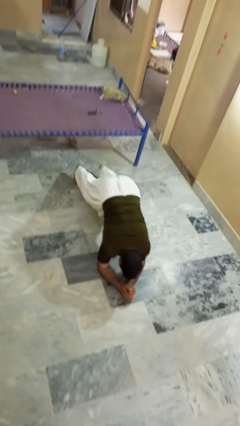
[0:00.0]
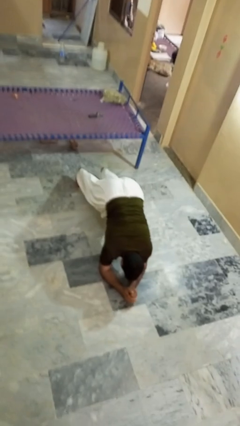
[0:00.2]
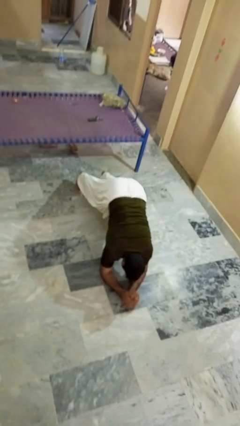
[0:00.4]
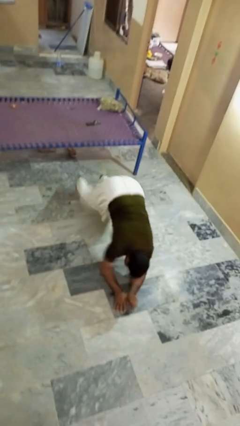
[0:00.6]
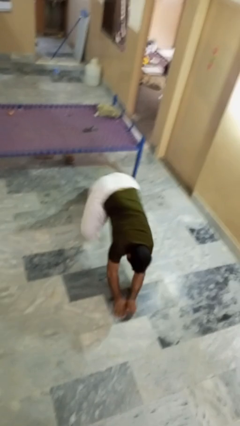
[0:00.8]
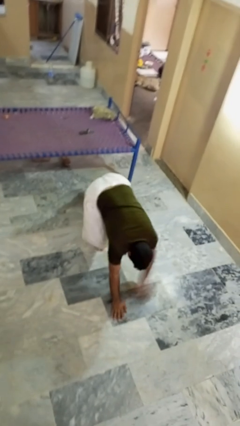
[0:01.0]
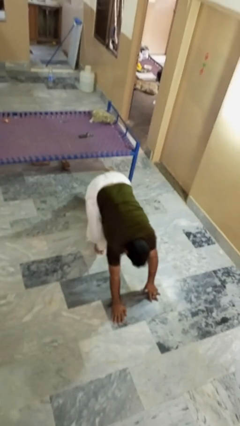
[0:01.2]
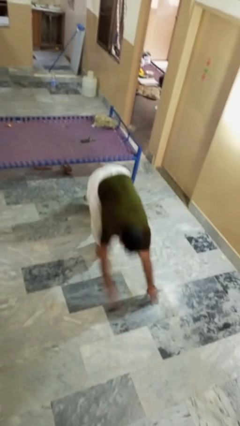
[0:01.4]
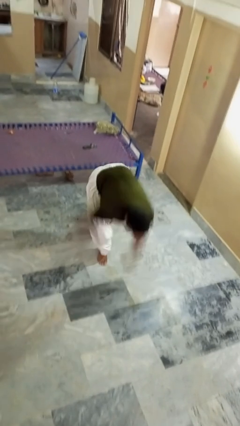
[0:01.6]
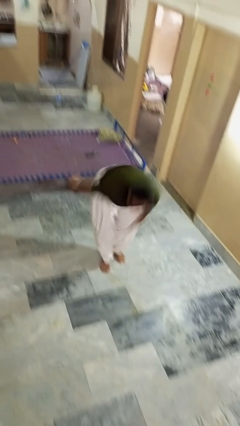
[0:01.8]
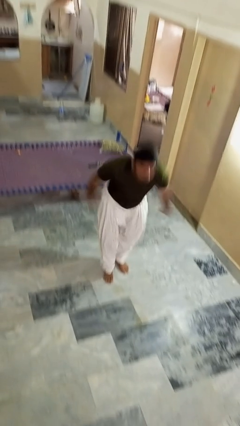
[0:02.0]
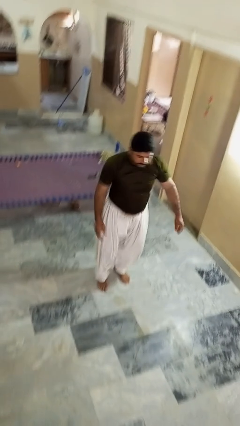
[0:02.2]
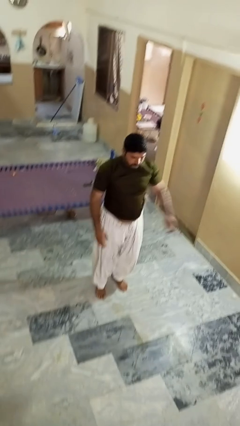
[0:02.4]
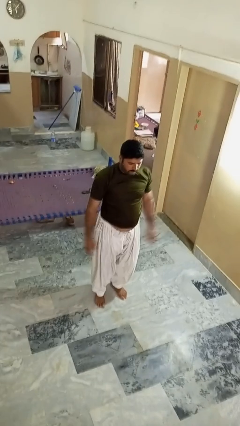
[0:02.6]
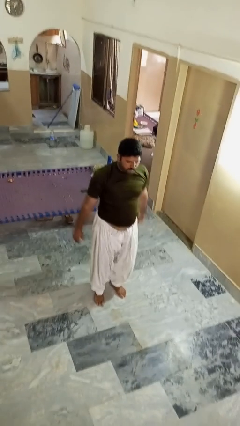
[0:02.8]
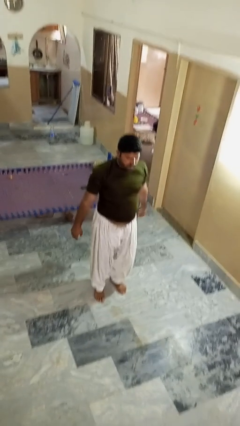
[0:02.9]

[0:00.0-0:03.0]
person stands up from floor

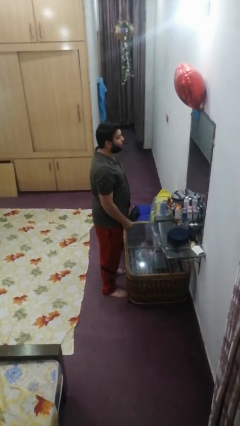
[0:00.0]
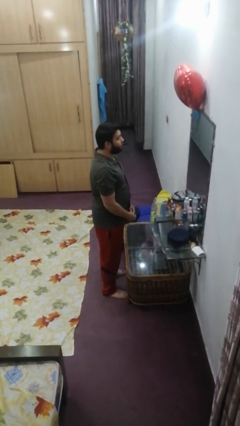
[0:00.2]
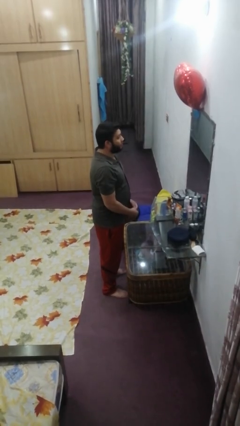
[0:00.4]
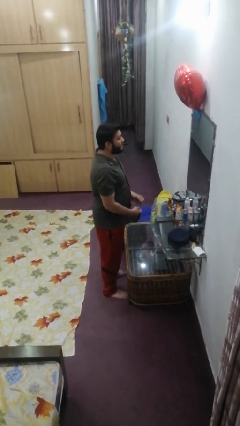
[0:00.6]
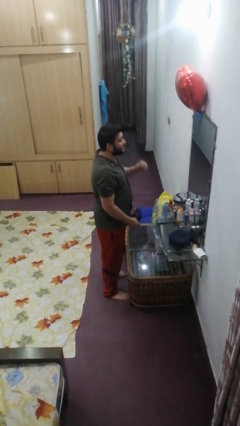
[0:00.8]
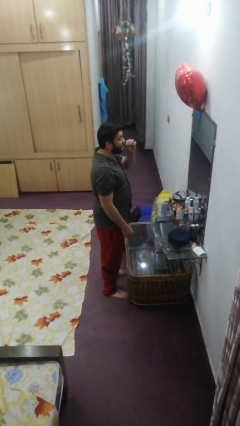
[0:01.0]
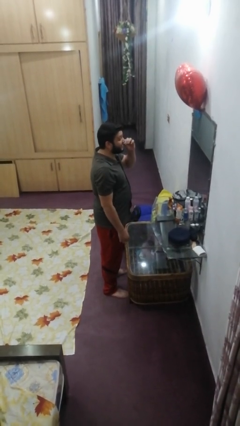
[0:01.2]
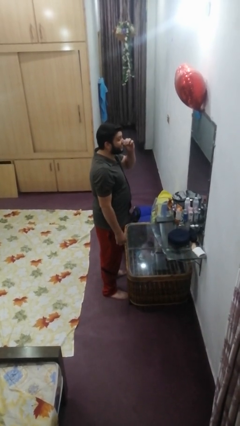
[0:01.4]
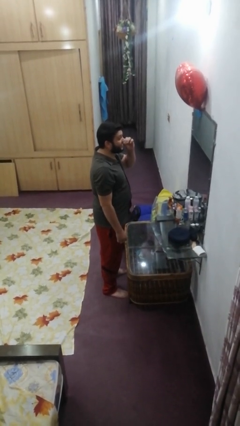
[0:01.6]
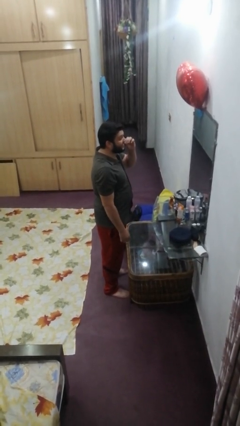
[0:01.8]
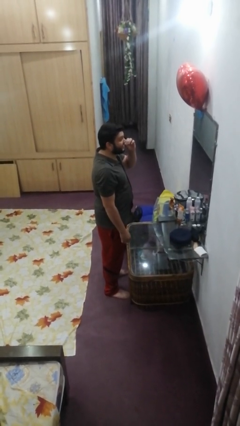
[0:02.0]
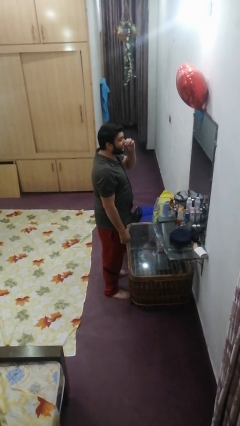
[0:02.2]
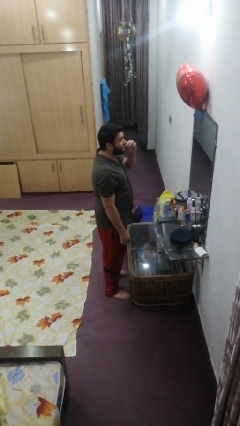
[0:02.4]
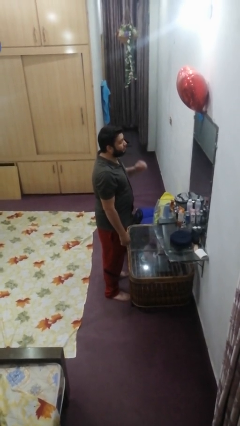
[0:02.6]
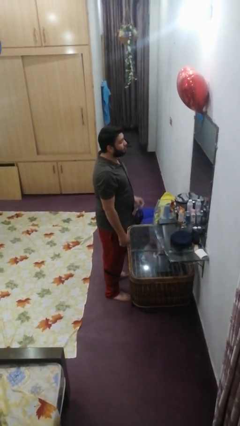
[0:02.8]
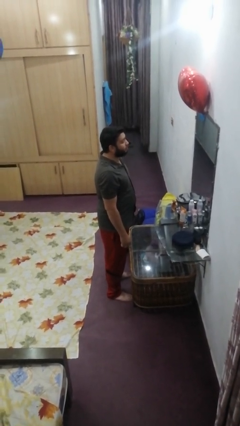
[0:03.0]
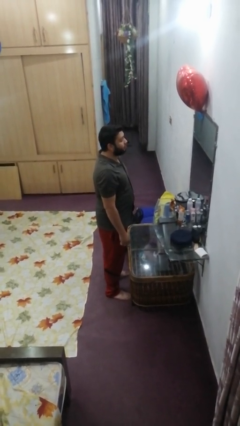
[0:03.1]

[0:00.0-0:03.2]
person flosses

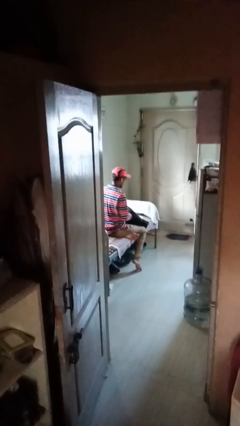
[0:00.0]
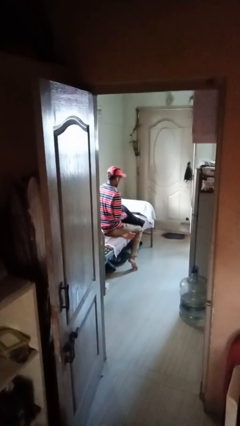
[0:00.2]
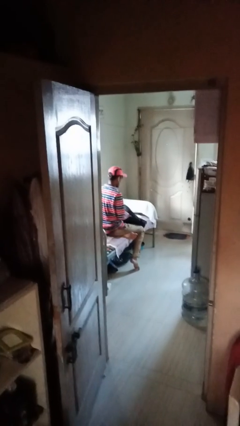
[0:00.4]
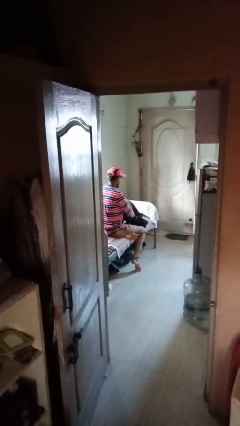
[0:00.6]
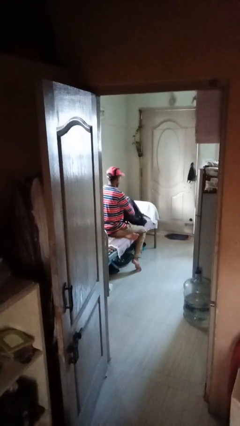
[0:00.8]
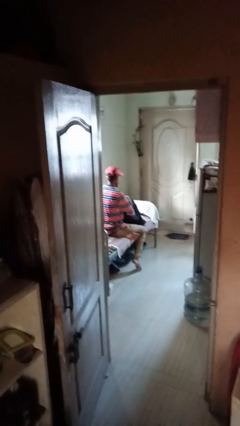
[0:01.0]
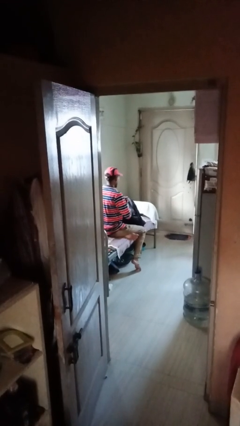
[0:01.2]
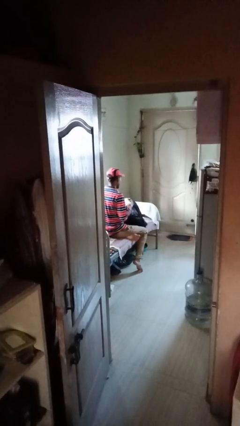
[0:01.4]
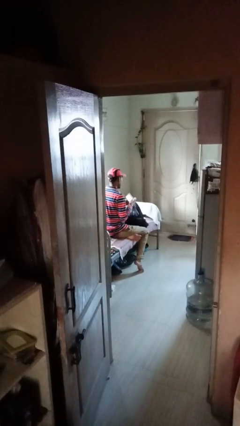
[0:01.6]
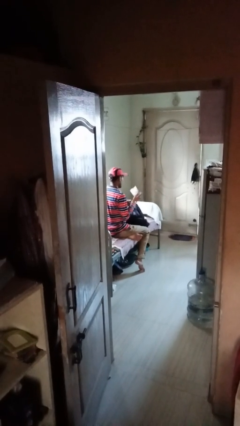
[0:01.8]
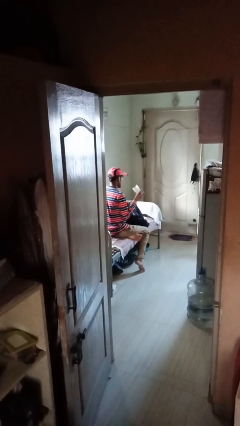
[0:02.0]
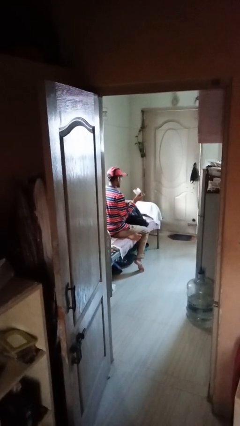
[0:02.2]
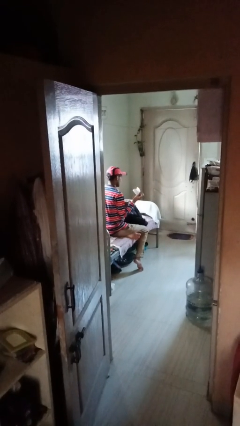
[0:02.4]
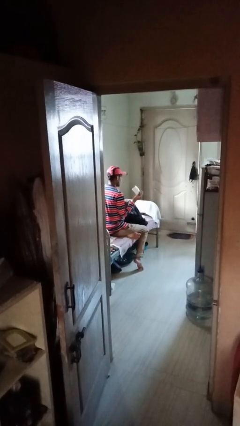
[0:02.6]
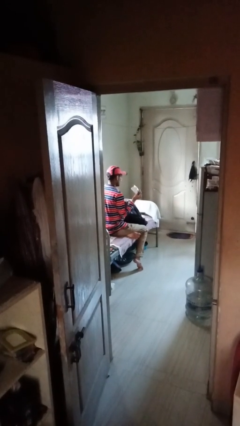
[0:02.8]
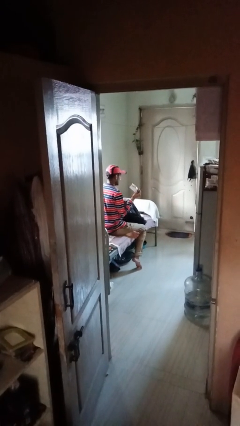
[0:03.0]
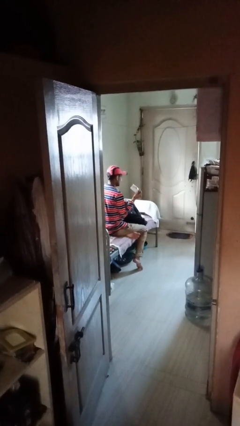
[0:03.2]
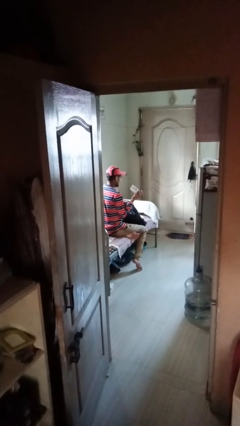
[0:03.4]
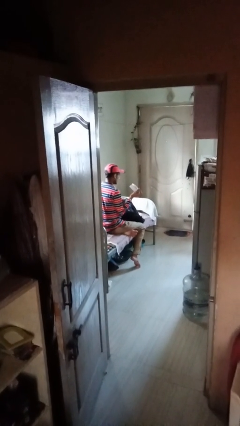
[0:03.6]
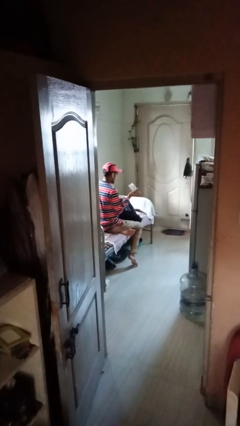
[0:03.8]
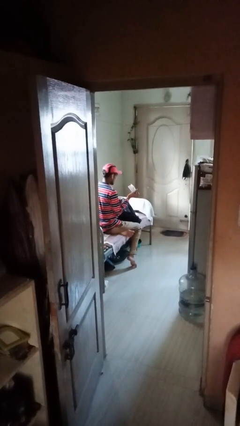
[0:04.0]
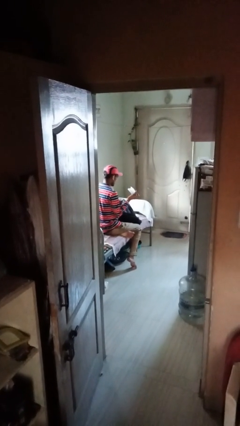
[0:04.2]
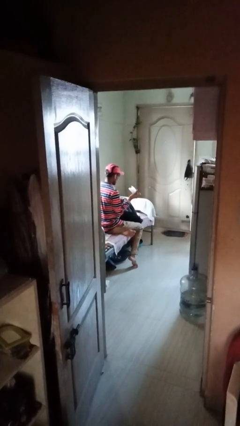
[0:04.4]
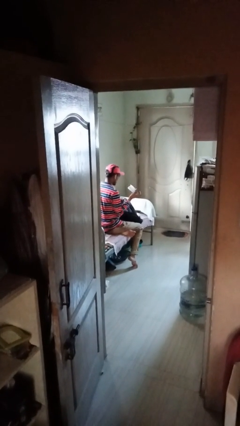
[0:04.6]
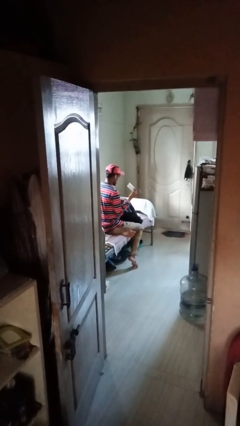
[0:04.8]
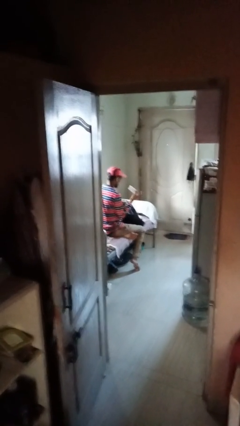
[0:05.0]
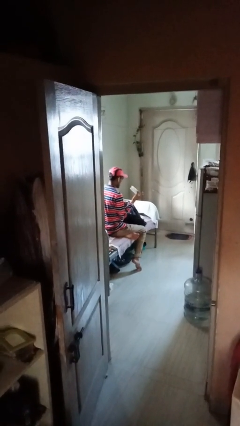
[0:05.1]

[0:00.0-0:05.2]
person takes object from backpack

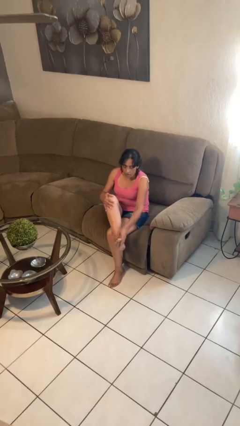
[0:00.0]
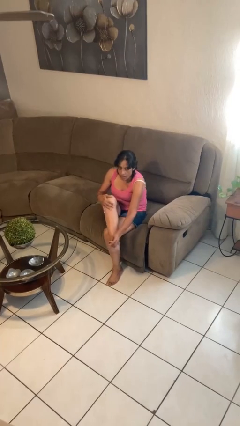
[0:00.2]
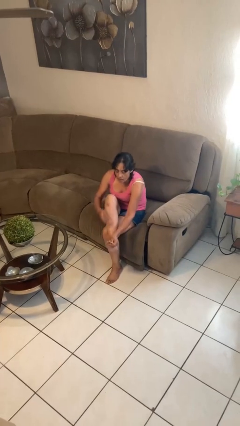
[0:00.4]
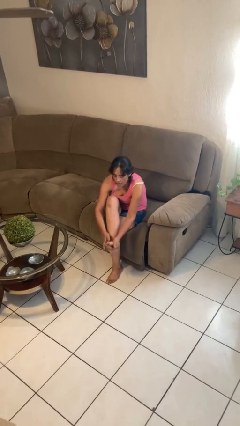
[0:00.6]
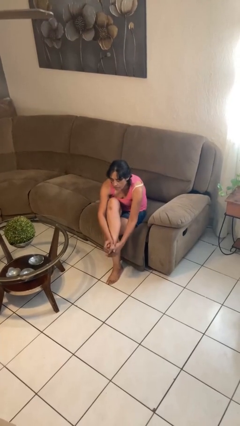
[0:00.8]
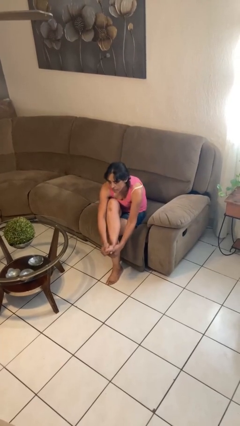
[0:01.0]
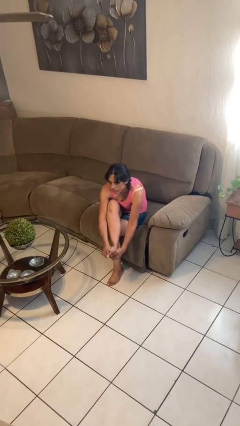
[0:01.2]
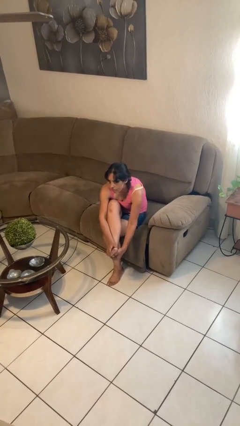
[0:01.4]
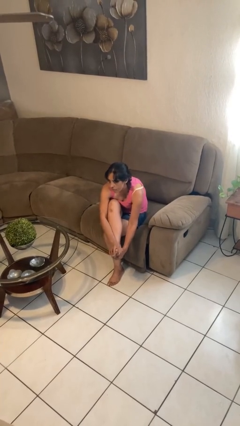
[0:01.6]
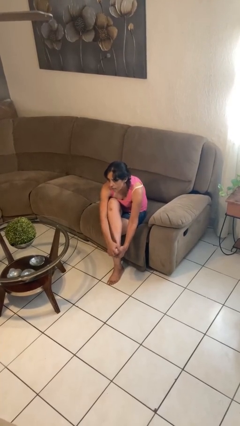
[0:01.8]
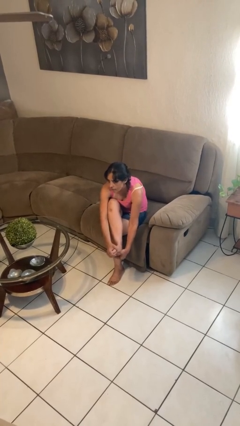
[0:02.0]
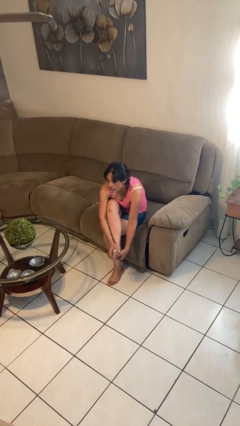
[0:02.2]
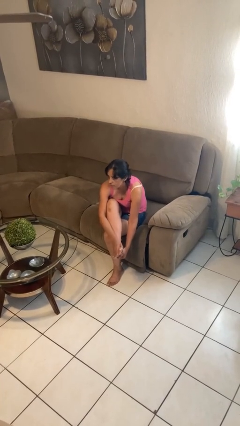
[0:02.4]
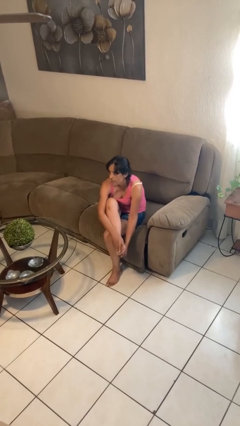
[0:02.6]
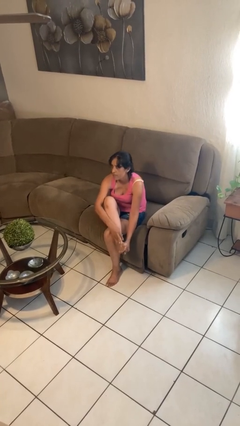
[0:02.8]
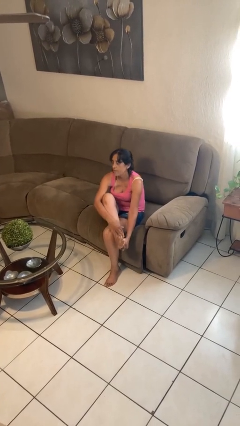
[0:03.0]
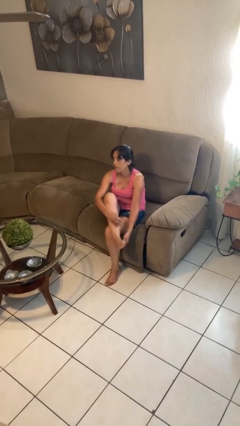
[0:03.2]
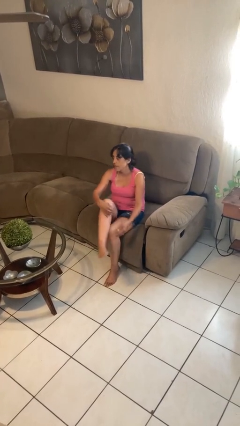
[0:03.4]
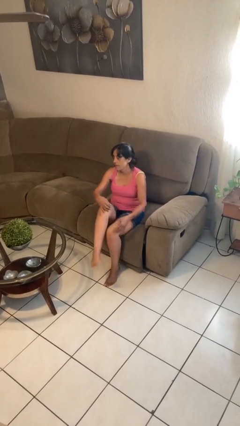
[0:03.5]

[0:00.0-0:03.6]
person rubs foot

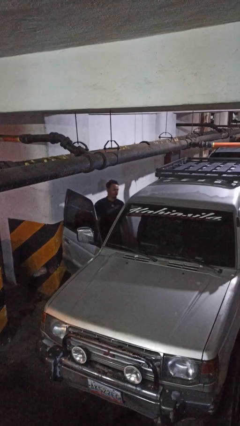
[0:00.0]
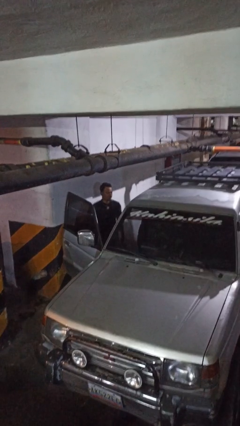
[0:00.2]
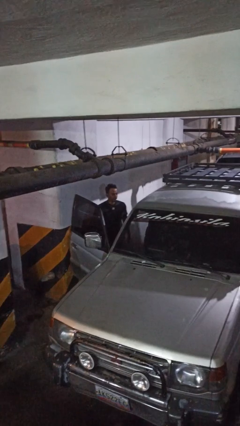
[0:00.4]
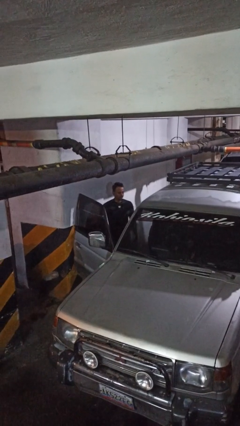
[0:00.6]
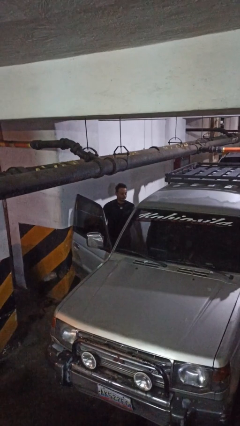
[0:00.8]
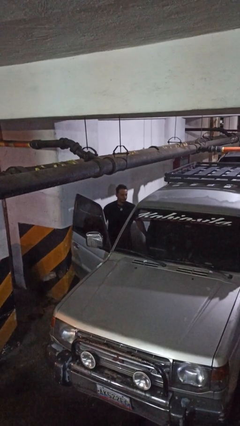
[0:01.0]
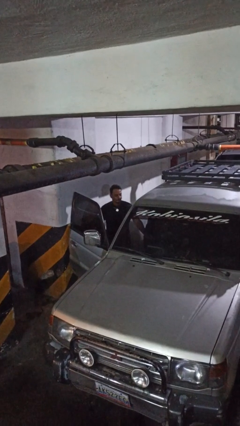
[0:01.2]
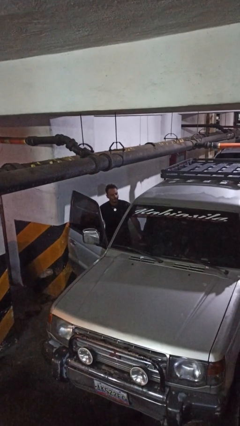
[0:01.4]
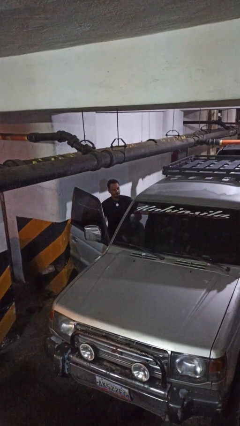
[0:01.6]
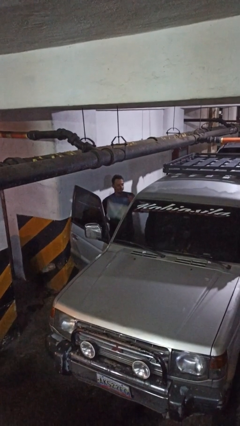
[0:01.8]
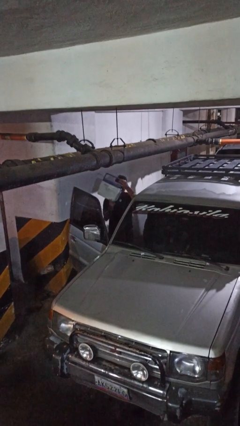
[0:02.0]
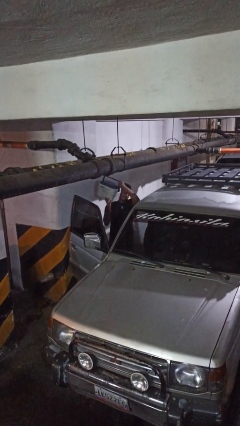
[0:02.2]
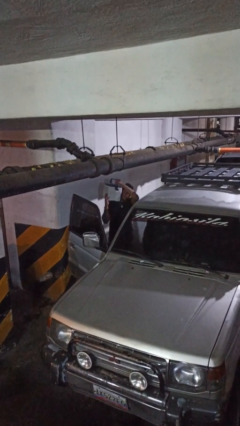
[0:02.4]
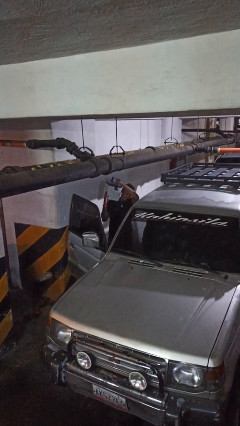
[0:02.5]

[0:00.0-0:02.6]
person unloads car
